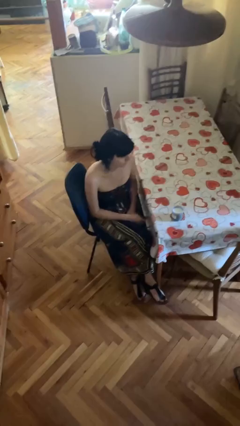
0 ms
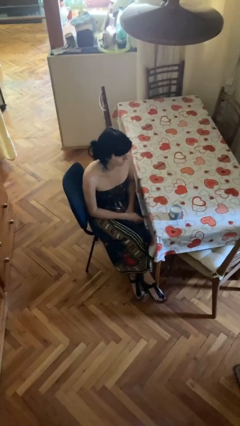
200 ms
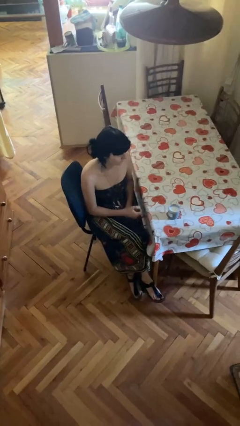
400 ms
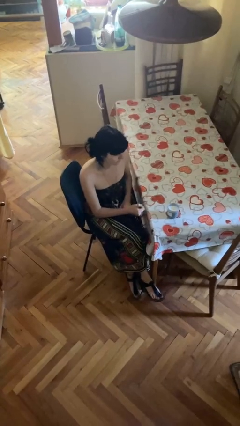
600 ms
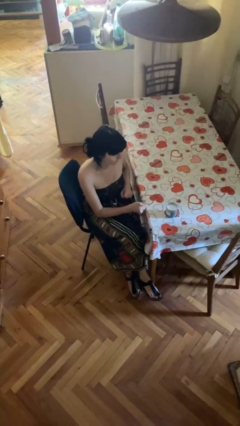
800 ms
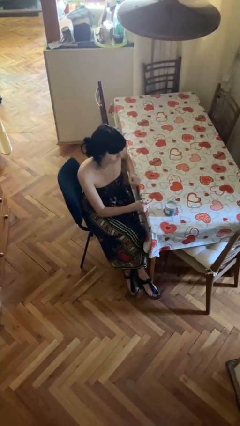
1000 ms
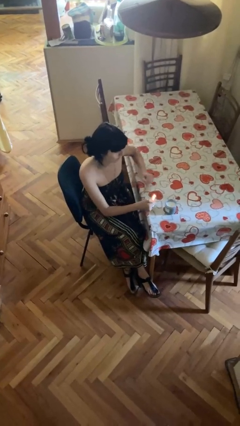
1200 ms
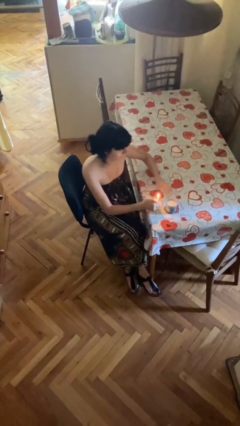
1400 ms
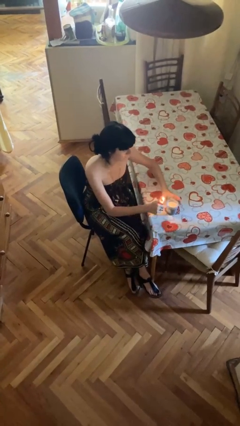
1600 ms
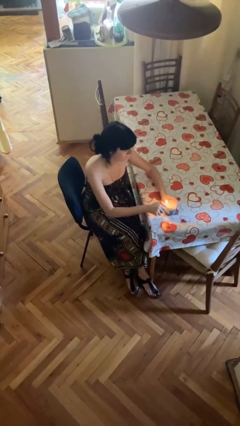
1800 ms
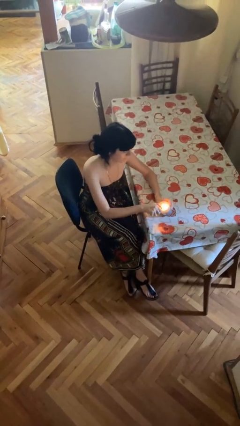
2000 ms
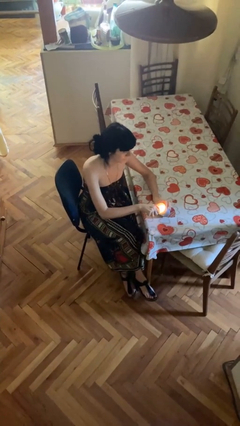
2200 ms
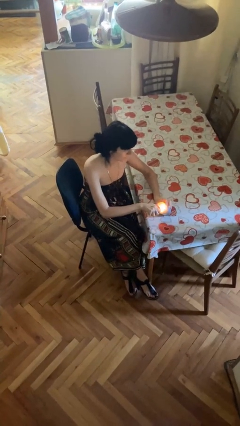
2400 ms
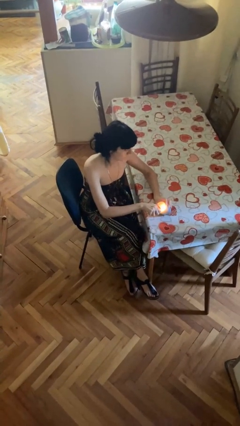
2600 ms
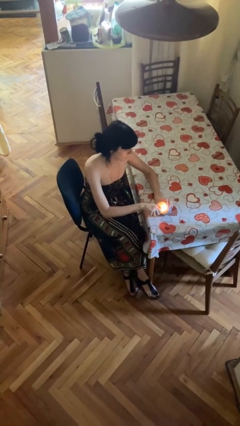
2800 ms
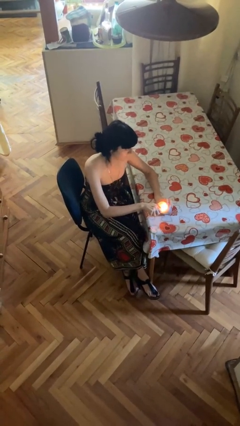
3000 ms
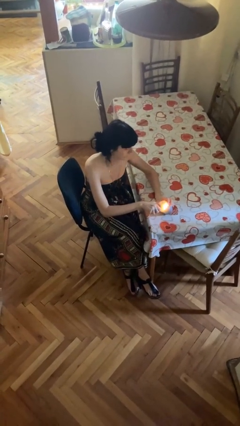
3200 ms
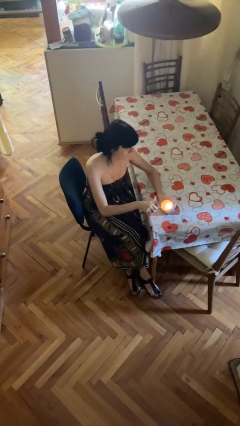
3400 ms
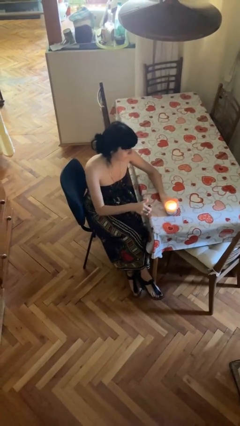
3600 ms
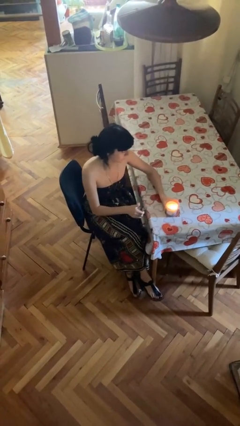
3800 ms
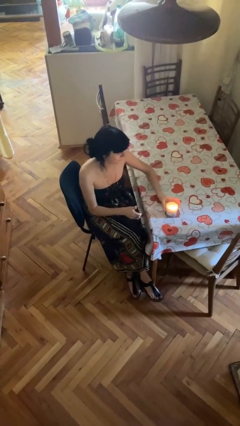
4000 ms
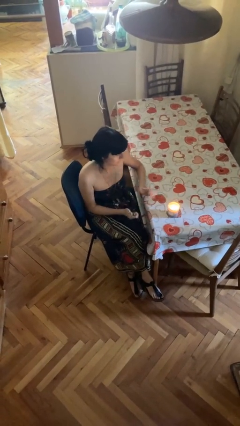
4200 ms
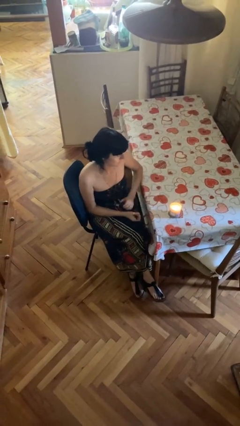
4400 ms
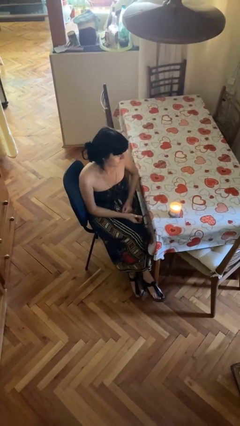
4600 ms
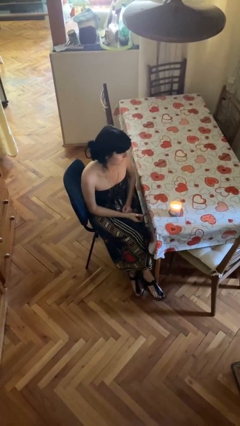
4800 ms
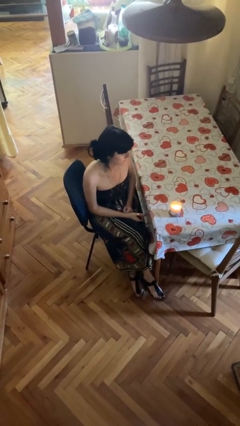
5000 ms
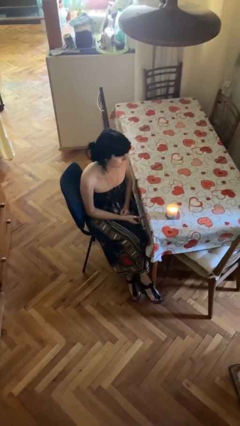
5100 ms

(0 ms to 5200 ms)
person lights candle

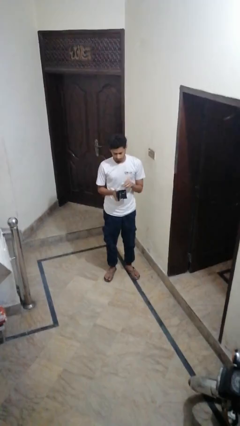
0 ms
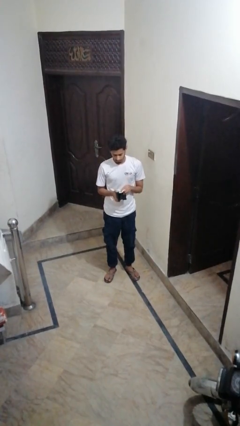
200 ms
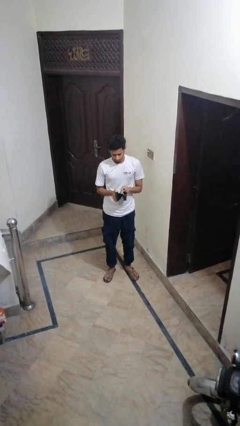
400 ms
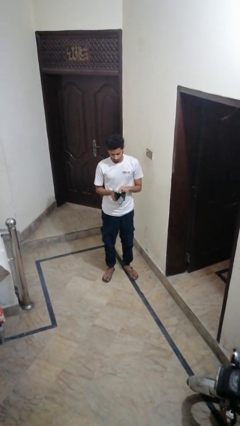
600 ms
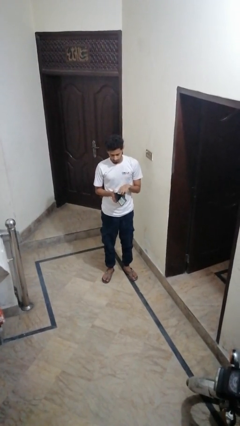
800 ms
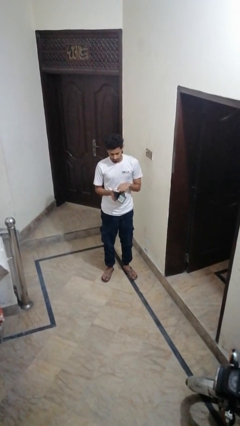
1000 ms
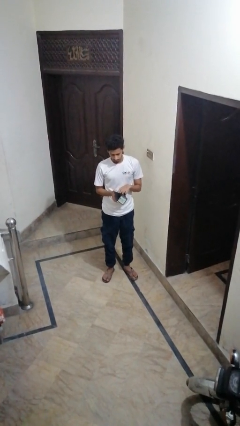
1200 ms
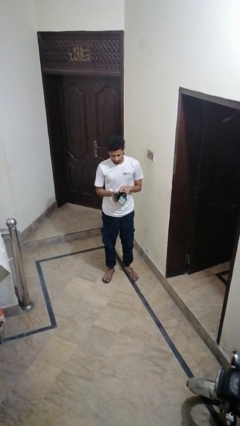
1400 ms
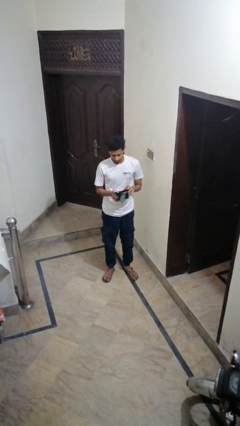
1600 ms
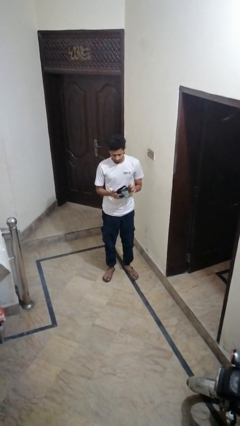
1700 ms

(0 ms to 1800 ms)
person puts object into purse

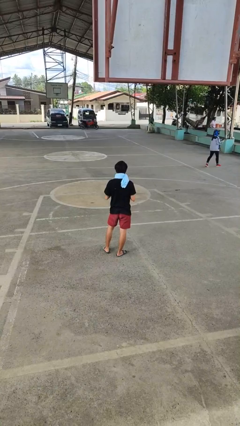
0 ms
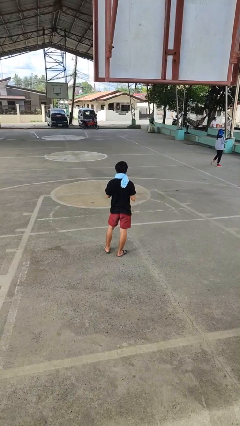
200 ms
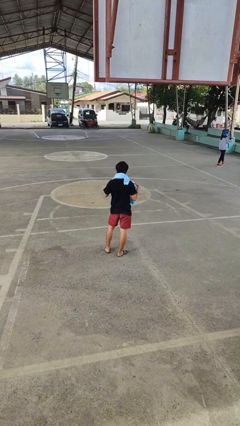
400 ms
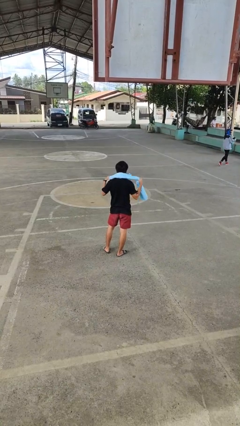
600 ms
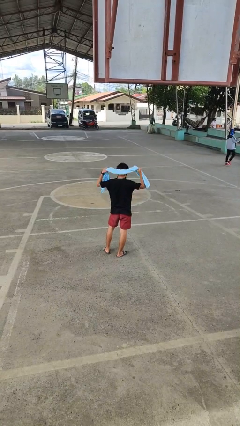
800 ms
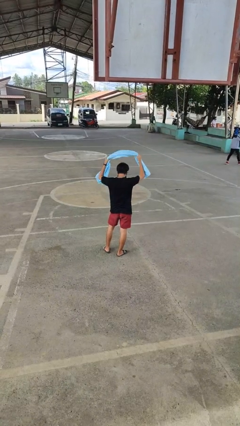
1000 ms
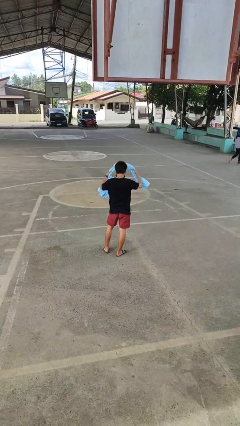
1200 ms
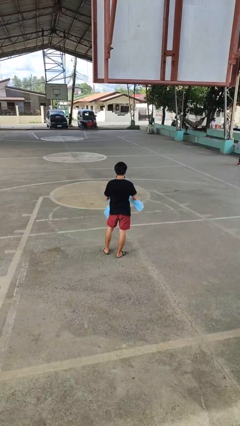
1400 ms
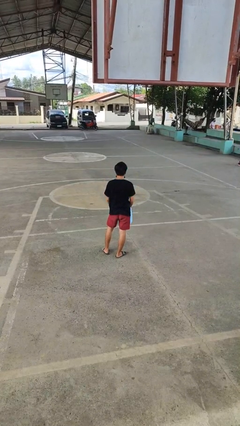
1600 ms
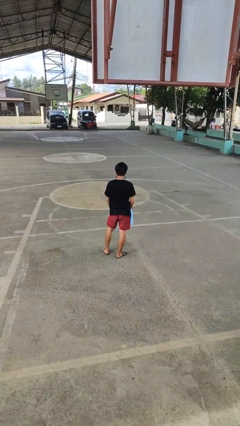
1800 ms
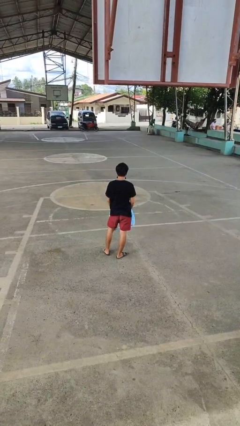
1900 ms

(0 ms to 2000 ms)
person takes off scarf

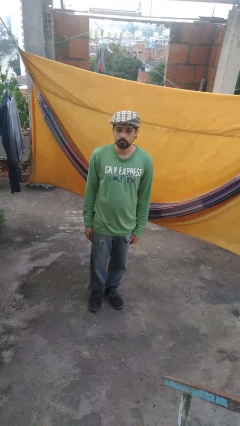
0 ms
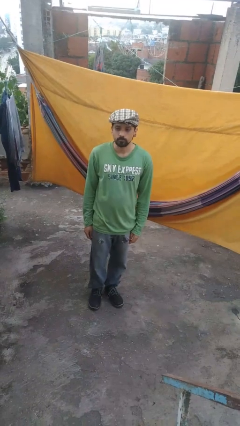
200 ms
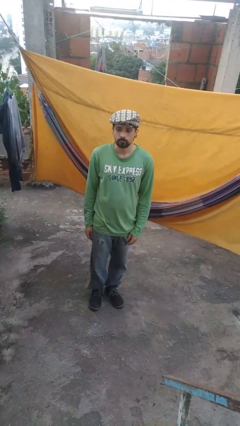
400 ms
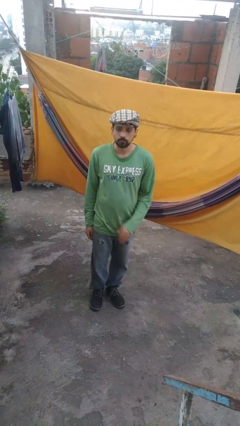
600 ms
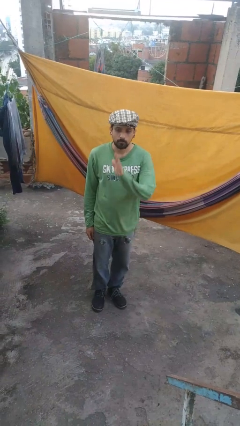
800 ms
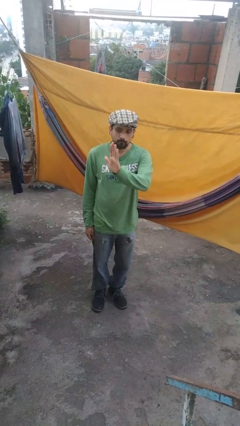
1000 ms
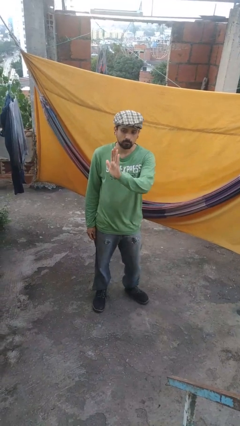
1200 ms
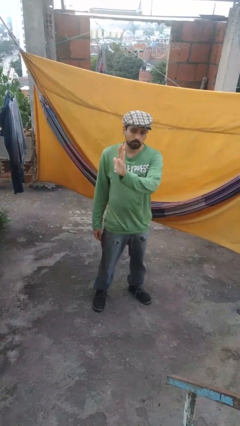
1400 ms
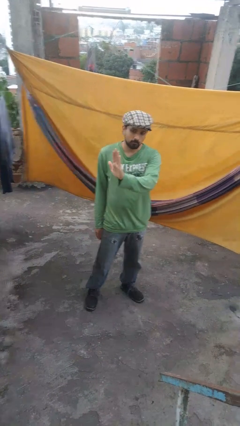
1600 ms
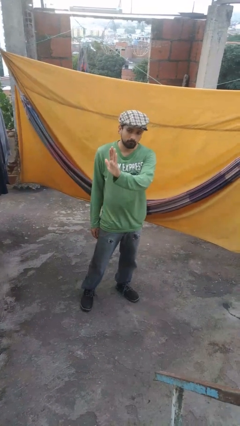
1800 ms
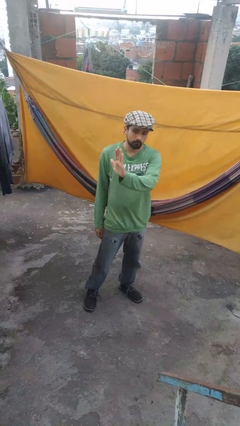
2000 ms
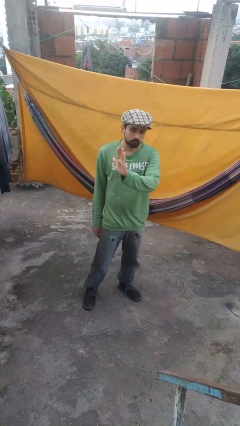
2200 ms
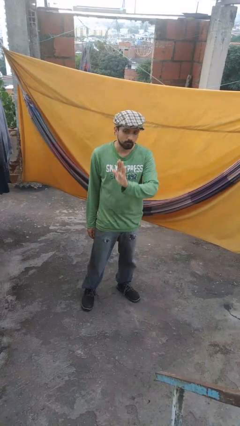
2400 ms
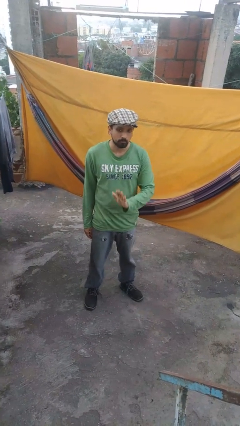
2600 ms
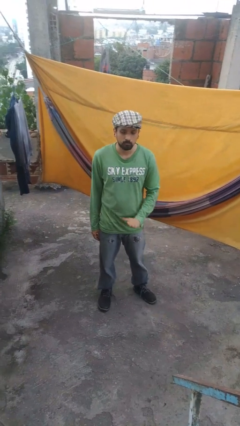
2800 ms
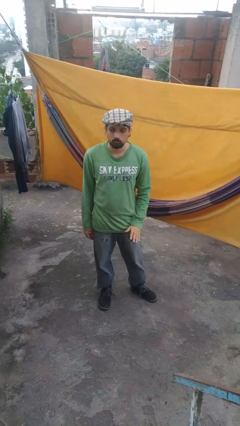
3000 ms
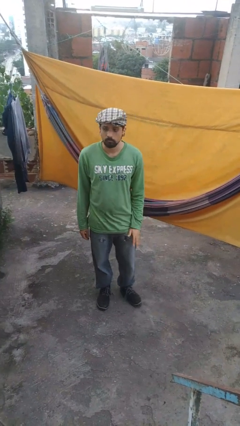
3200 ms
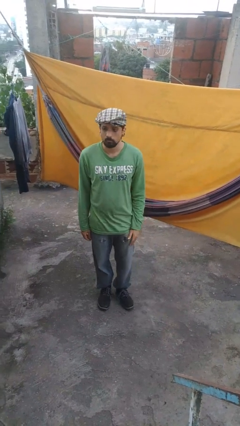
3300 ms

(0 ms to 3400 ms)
person gestures stop

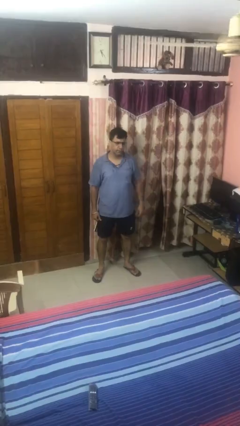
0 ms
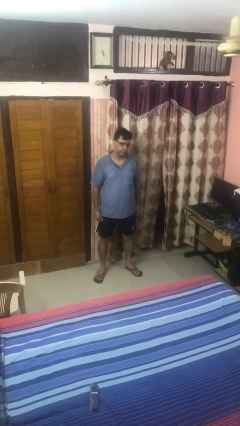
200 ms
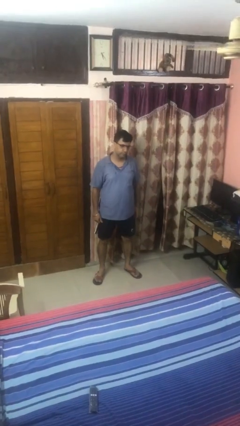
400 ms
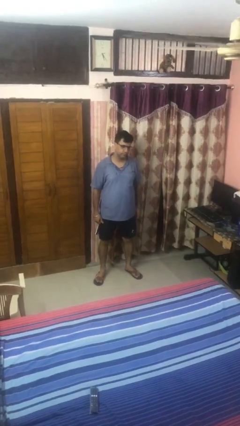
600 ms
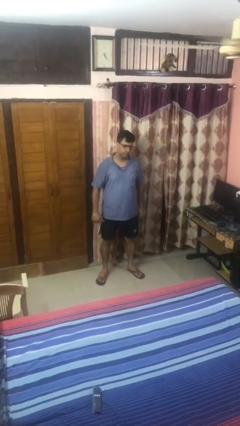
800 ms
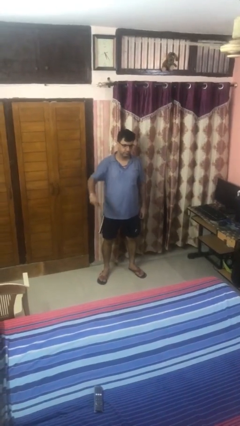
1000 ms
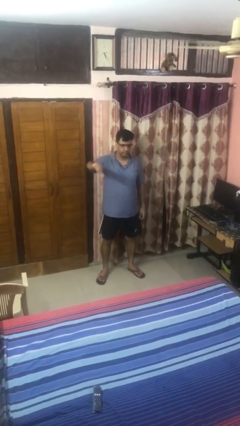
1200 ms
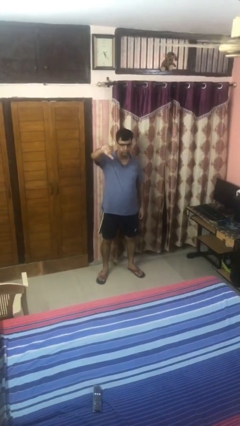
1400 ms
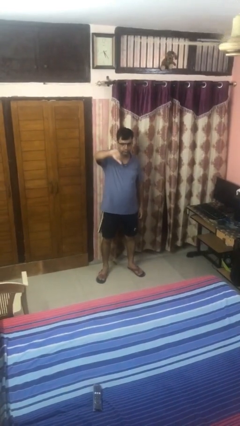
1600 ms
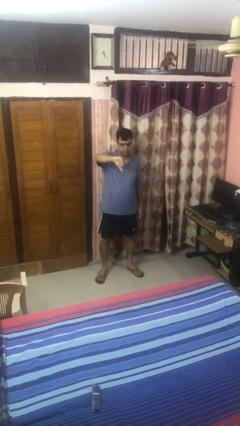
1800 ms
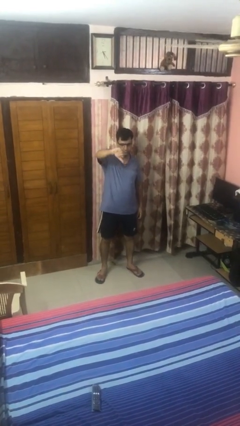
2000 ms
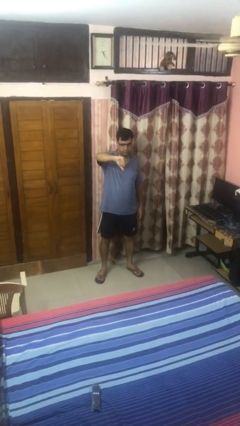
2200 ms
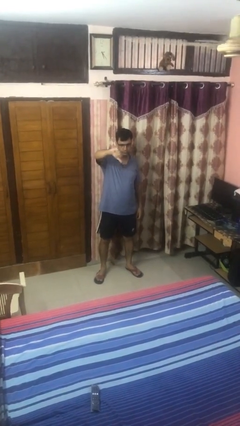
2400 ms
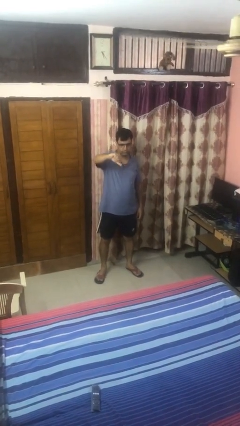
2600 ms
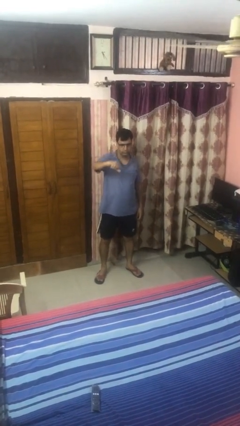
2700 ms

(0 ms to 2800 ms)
person gestures thumbs down

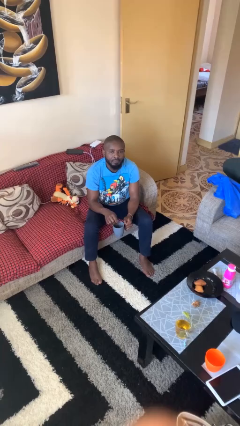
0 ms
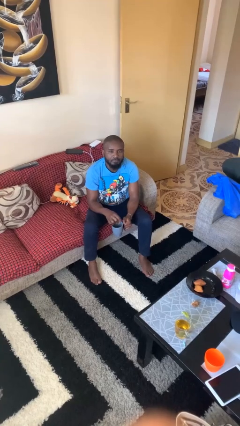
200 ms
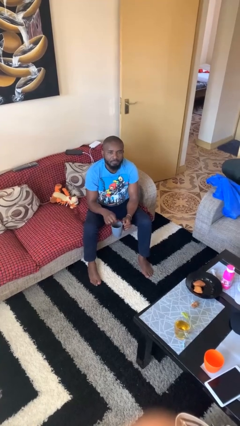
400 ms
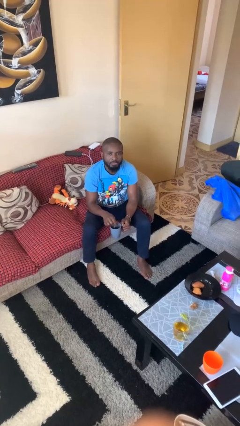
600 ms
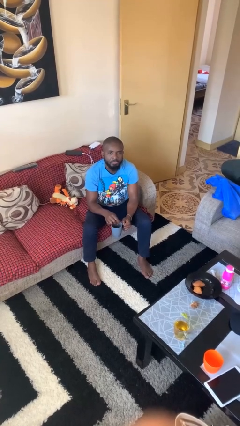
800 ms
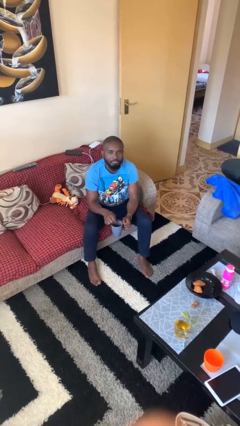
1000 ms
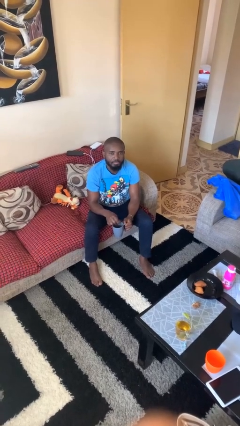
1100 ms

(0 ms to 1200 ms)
person stirs mug

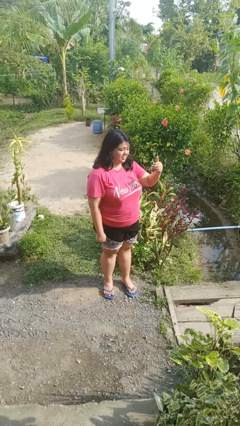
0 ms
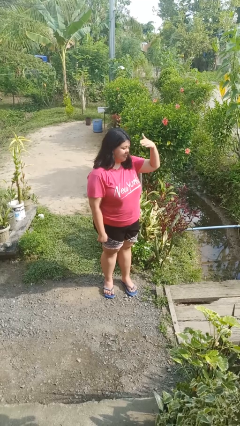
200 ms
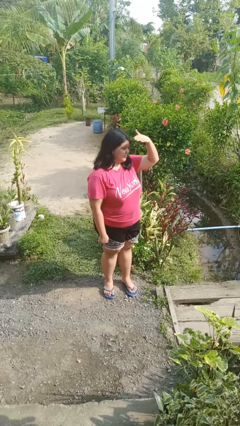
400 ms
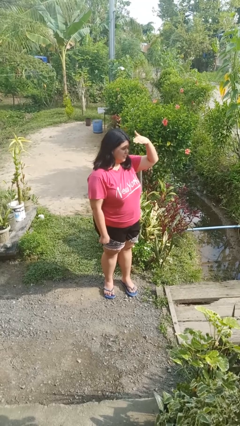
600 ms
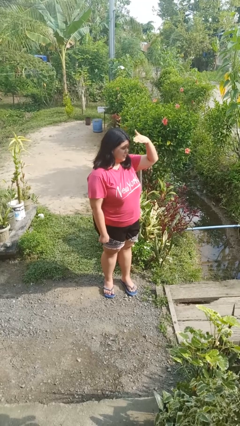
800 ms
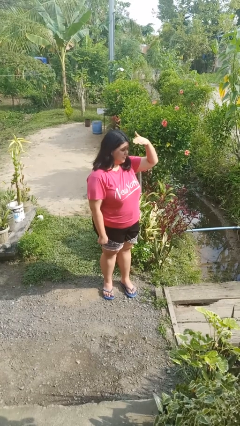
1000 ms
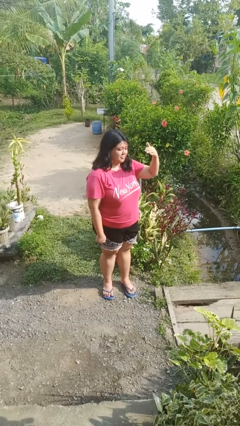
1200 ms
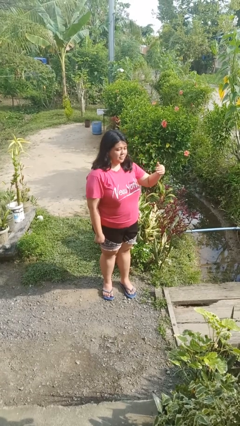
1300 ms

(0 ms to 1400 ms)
person shades eyes
